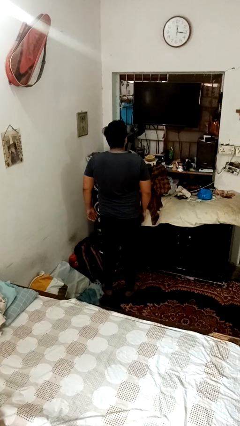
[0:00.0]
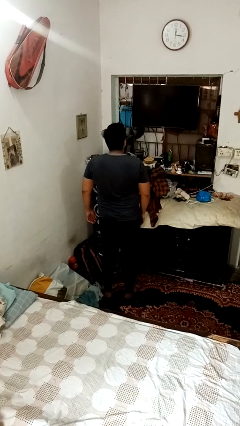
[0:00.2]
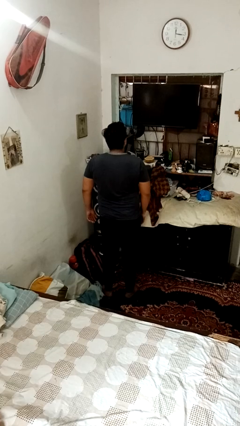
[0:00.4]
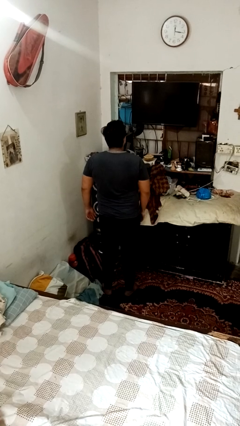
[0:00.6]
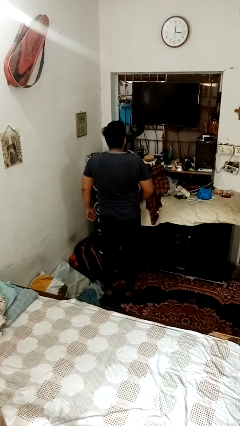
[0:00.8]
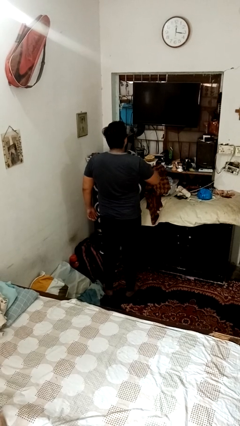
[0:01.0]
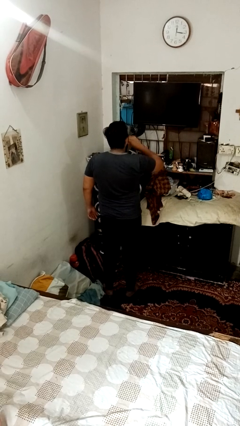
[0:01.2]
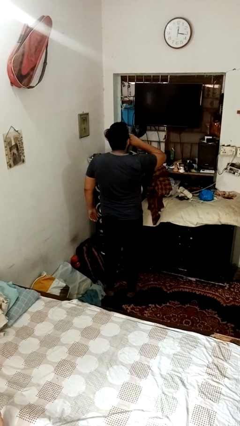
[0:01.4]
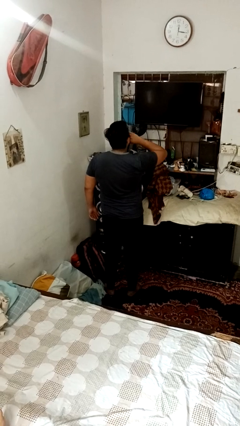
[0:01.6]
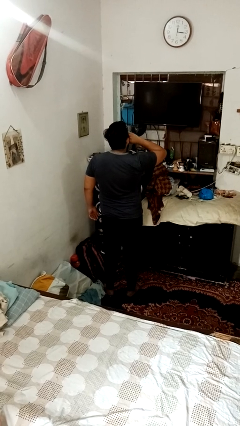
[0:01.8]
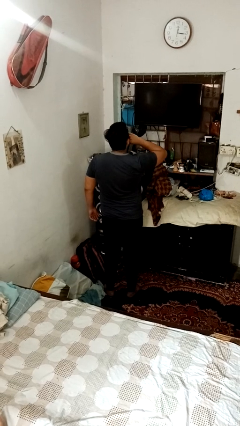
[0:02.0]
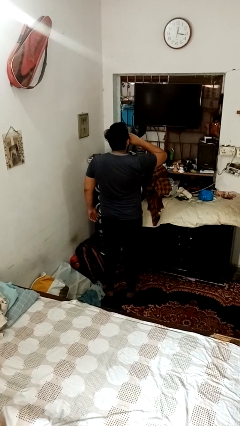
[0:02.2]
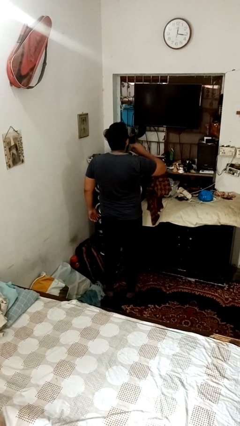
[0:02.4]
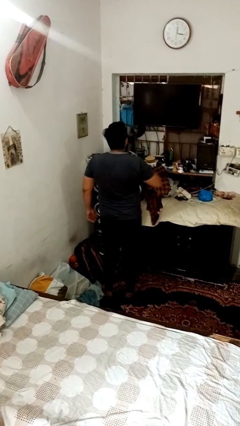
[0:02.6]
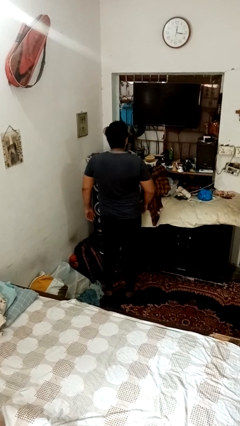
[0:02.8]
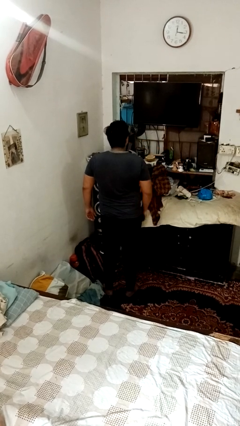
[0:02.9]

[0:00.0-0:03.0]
person yawns

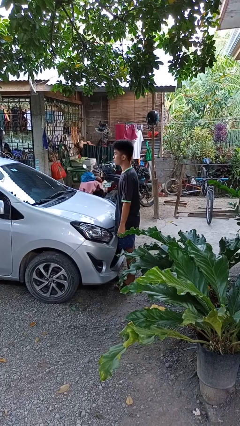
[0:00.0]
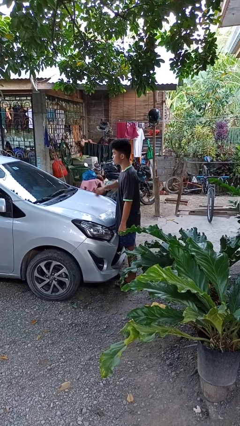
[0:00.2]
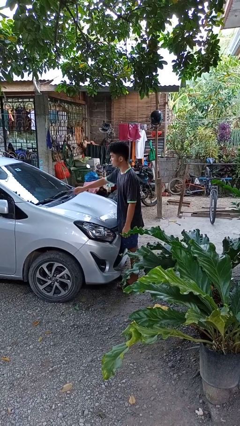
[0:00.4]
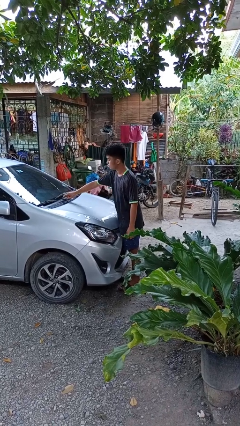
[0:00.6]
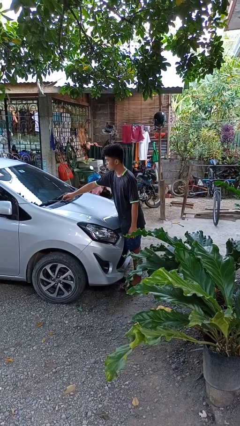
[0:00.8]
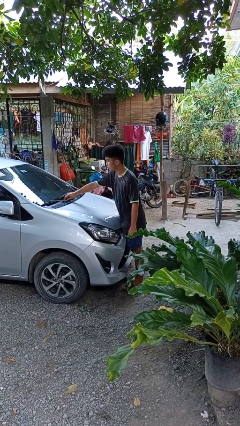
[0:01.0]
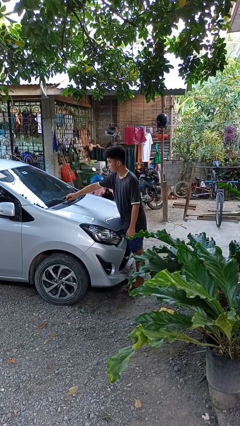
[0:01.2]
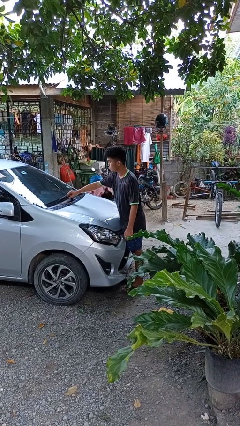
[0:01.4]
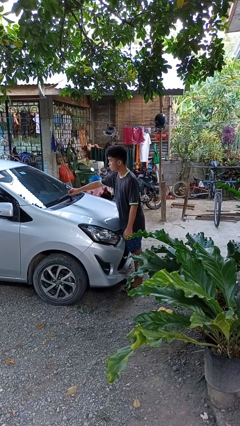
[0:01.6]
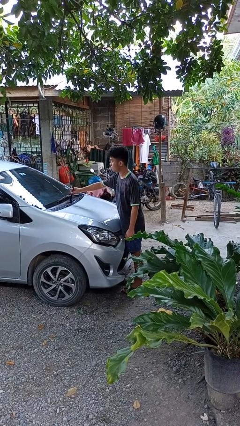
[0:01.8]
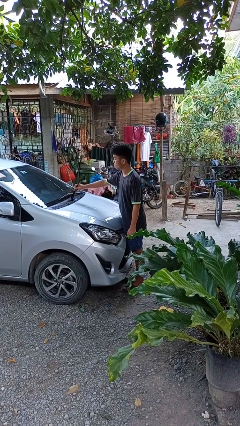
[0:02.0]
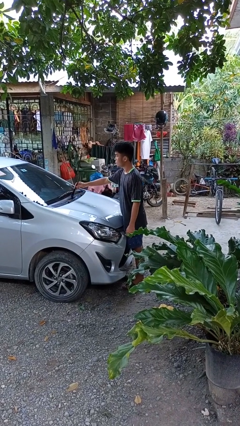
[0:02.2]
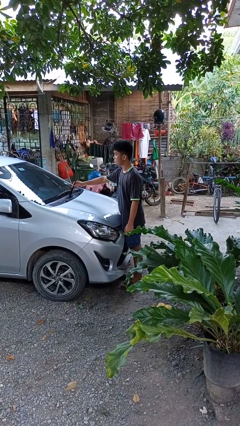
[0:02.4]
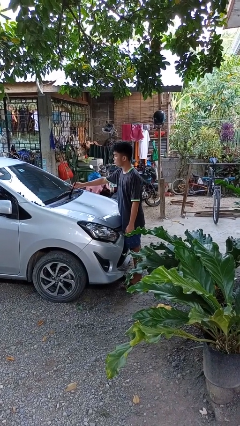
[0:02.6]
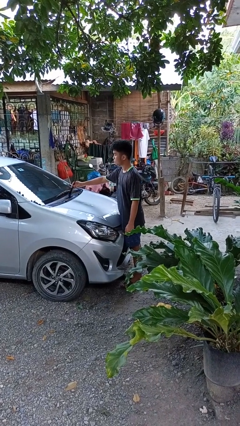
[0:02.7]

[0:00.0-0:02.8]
person flips up car wipers

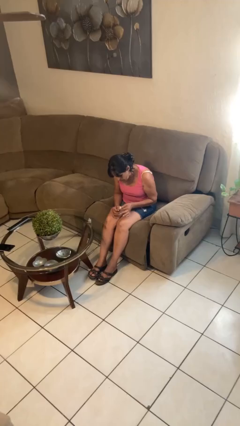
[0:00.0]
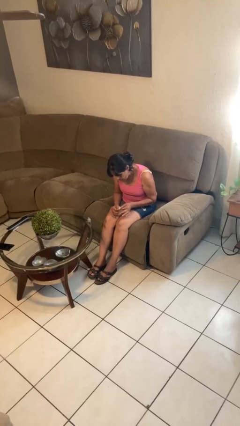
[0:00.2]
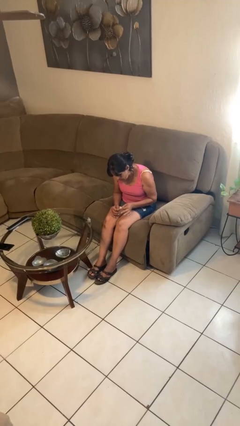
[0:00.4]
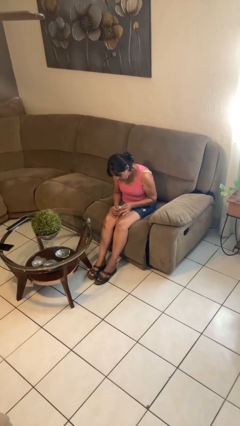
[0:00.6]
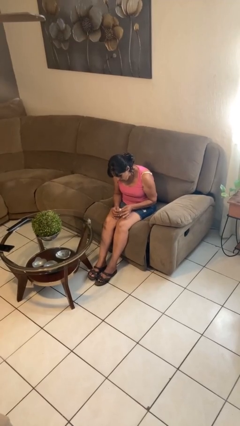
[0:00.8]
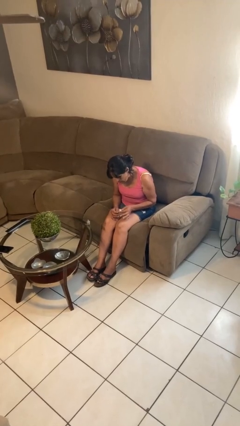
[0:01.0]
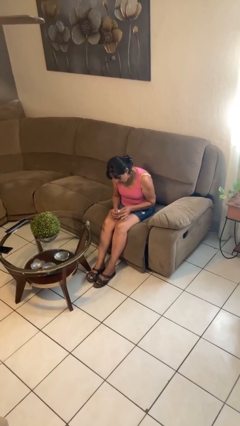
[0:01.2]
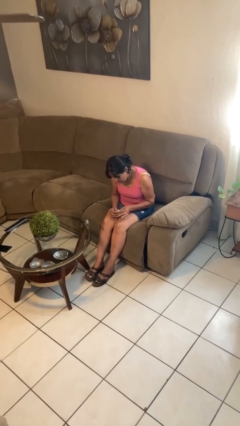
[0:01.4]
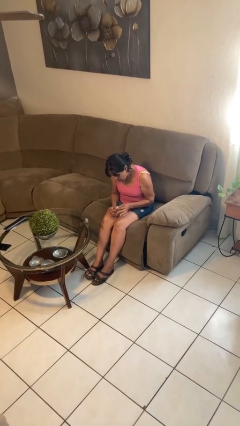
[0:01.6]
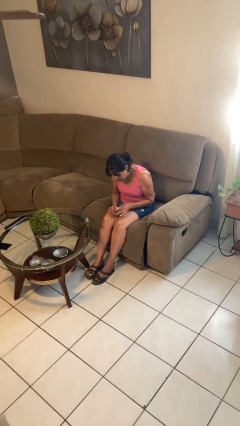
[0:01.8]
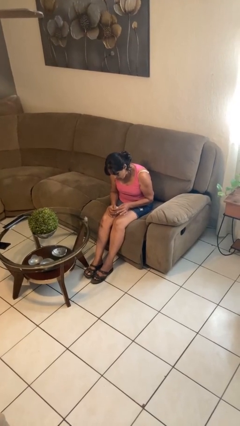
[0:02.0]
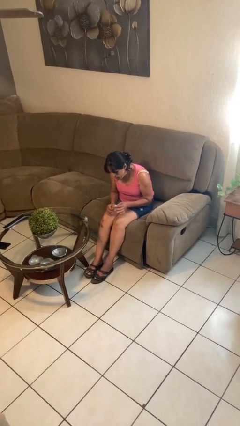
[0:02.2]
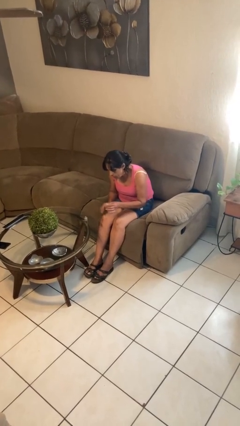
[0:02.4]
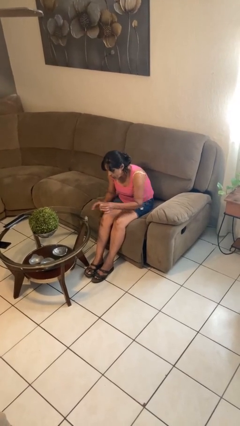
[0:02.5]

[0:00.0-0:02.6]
person paints fingernails

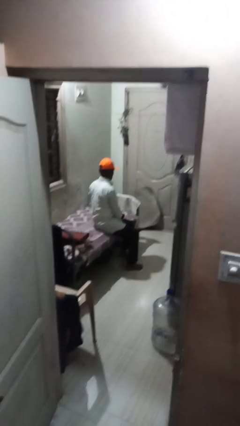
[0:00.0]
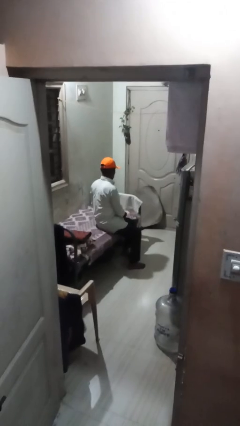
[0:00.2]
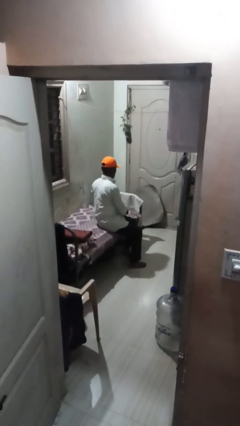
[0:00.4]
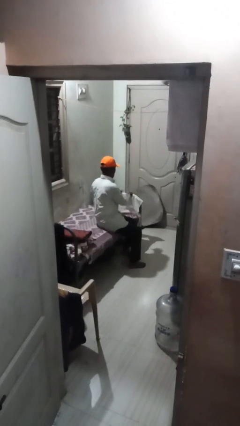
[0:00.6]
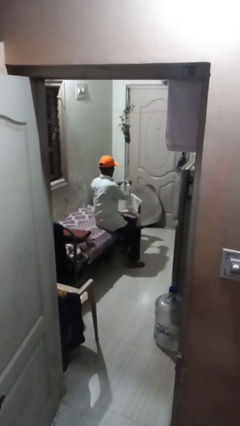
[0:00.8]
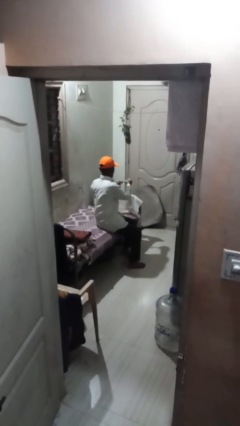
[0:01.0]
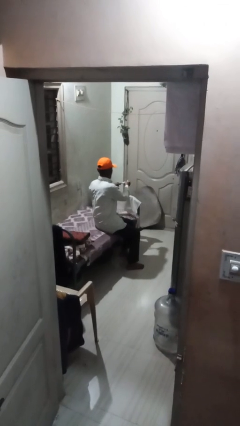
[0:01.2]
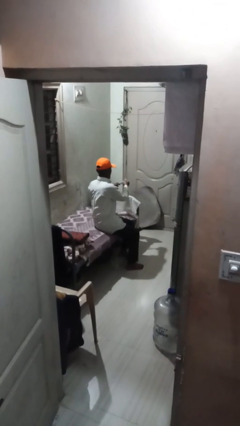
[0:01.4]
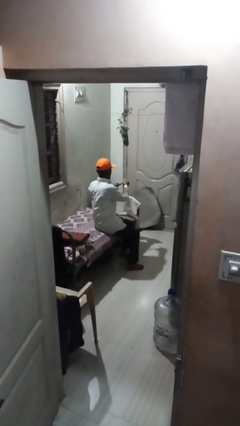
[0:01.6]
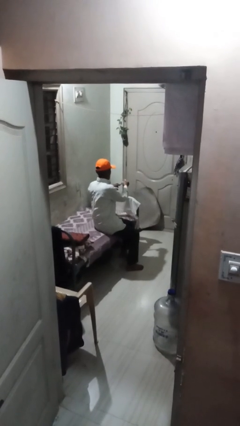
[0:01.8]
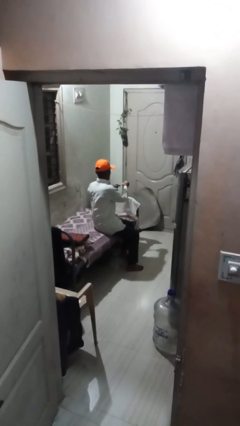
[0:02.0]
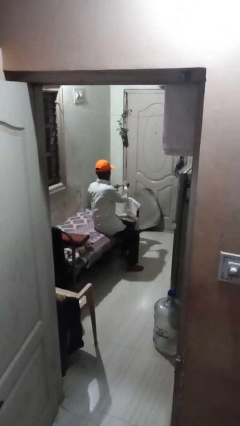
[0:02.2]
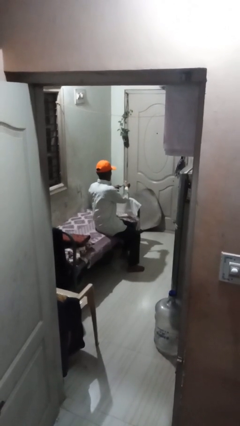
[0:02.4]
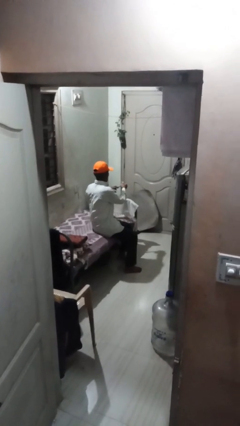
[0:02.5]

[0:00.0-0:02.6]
person clips fingernails

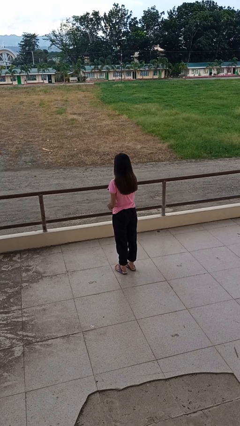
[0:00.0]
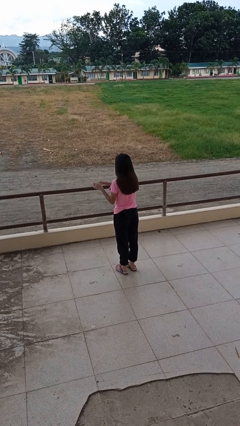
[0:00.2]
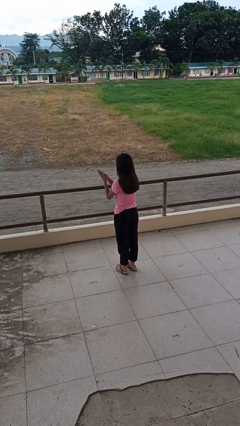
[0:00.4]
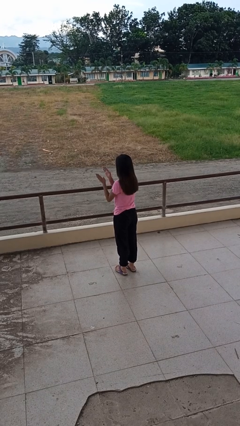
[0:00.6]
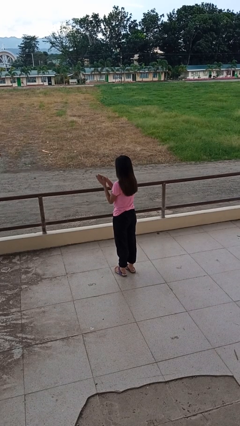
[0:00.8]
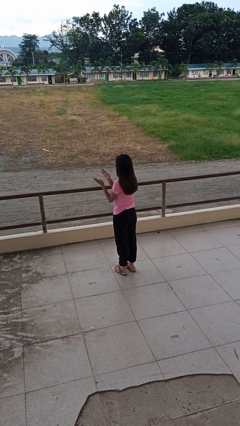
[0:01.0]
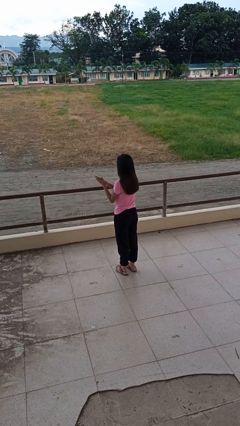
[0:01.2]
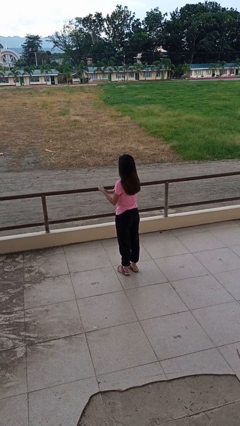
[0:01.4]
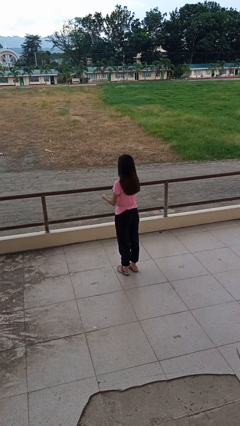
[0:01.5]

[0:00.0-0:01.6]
person claps hands

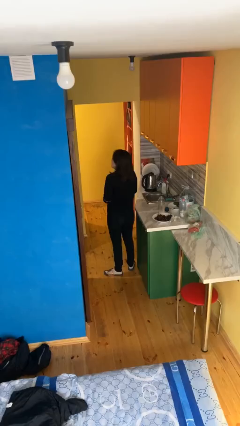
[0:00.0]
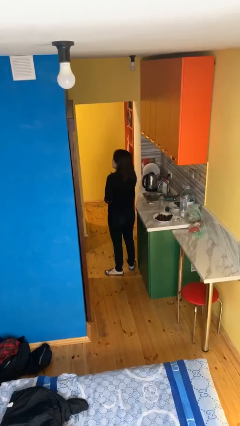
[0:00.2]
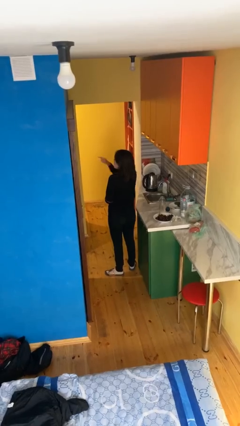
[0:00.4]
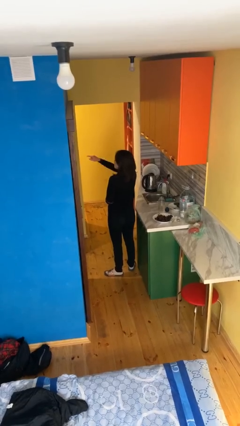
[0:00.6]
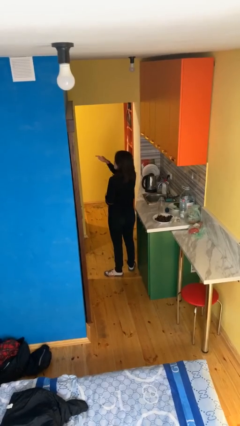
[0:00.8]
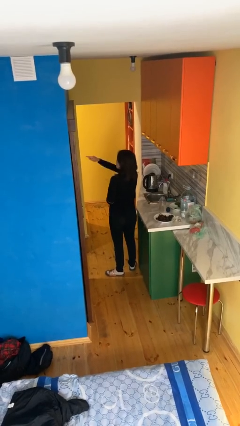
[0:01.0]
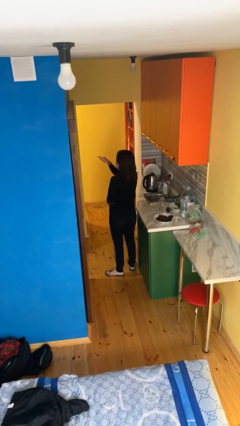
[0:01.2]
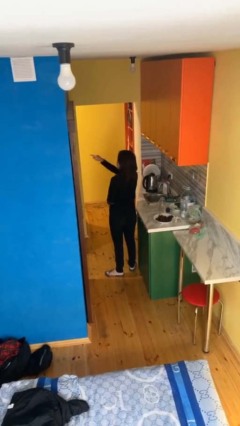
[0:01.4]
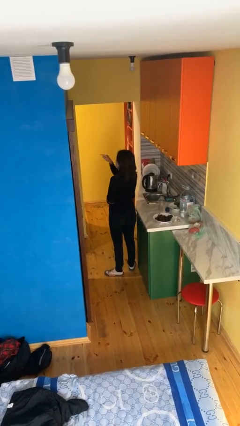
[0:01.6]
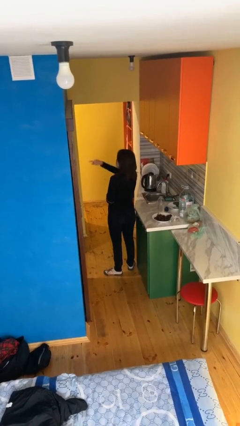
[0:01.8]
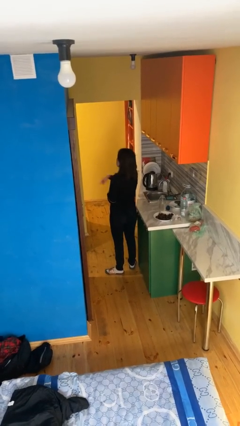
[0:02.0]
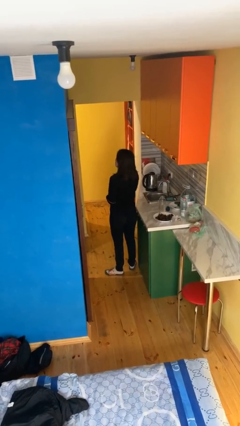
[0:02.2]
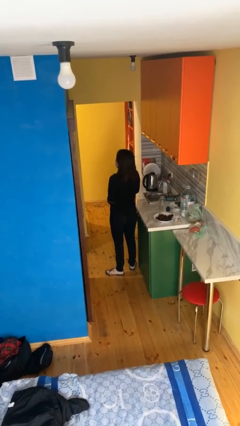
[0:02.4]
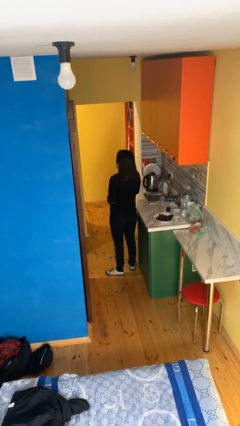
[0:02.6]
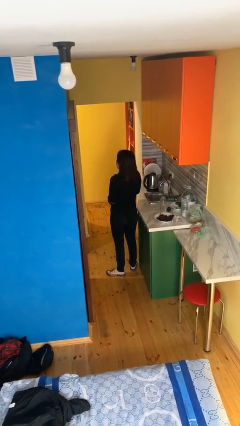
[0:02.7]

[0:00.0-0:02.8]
person points at person

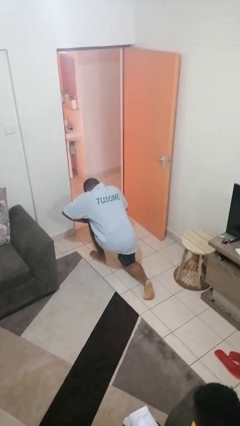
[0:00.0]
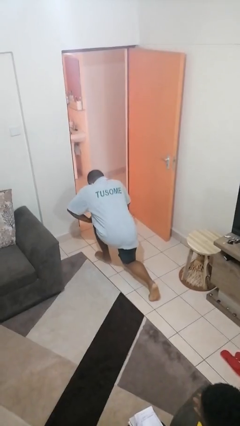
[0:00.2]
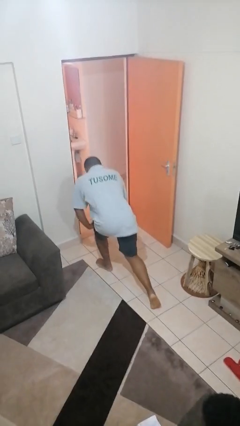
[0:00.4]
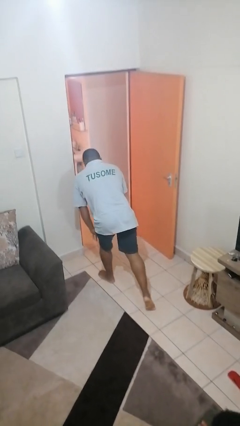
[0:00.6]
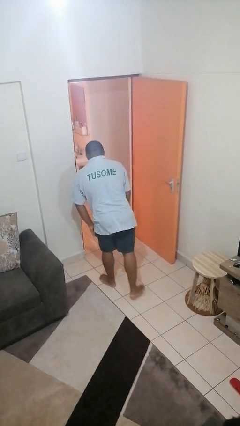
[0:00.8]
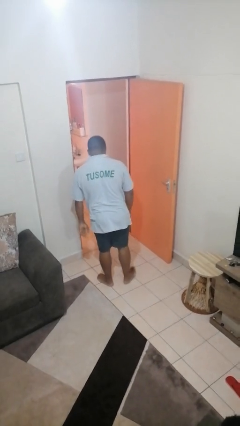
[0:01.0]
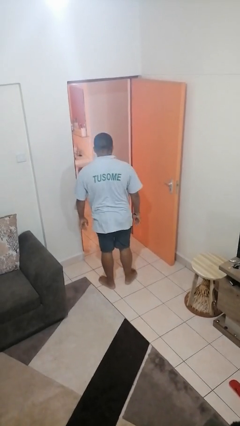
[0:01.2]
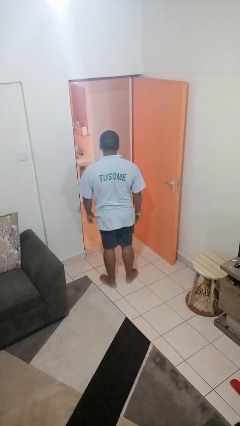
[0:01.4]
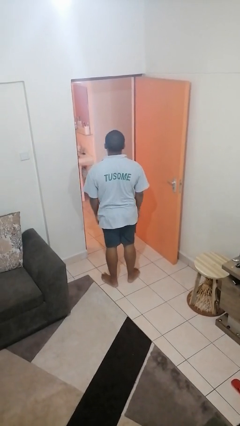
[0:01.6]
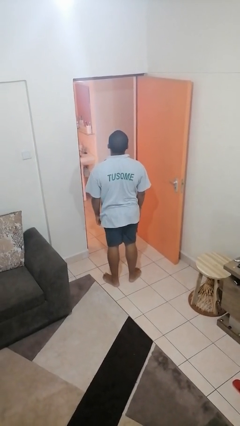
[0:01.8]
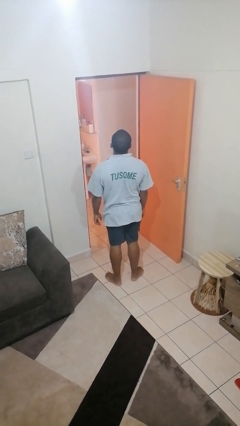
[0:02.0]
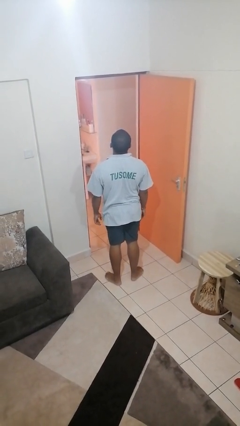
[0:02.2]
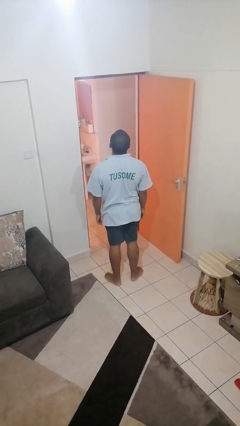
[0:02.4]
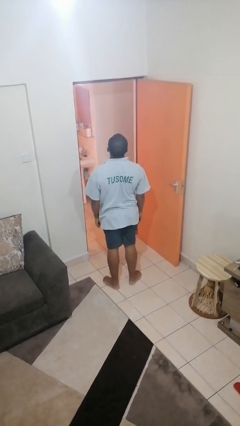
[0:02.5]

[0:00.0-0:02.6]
person stands up from floor
